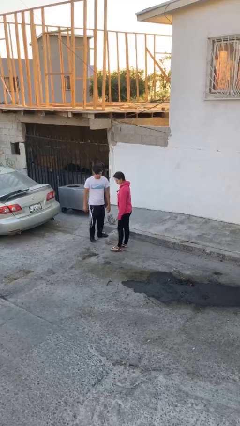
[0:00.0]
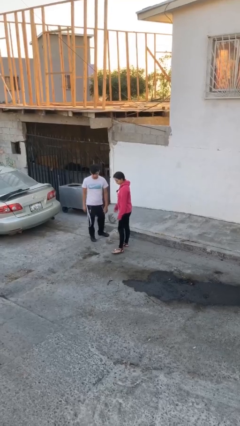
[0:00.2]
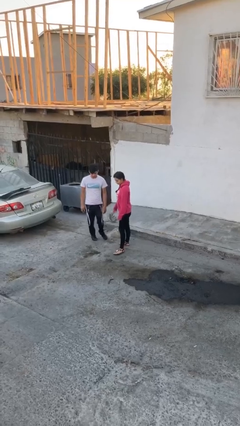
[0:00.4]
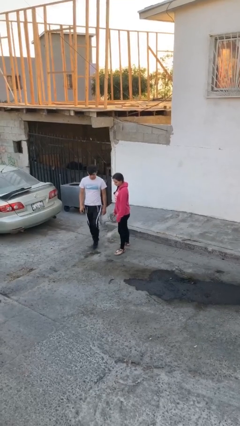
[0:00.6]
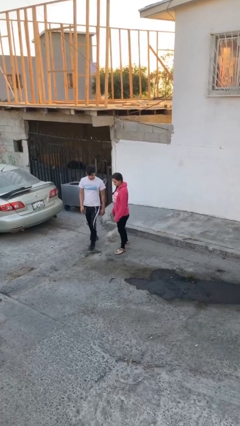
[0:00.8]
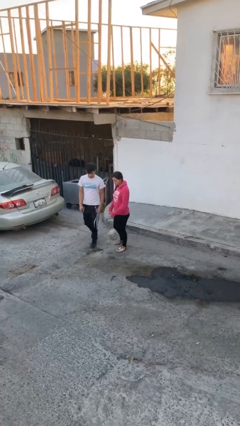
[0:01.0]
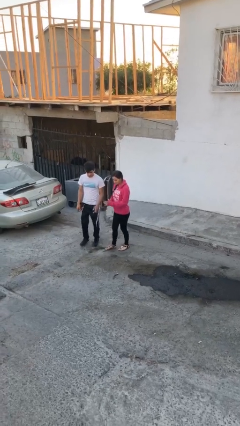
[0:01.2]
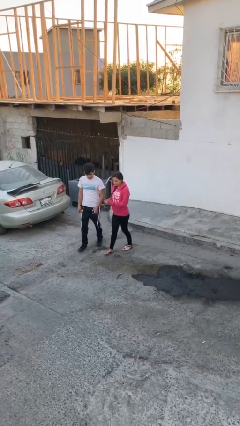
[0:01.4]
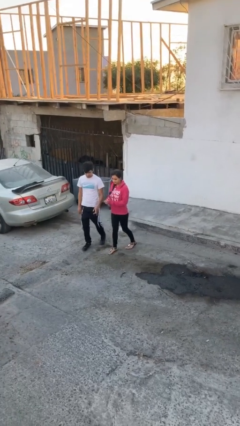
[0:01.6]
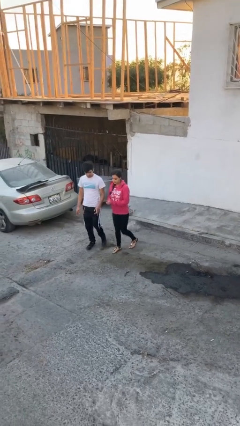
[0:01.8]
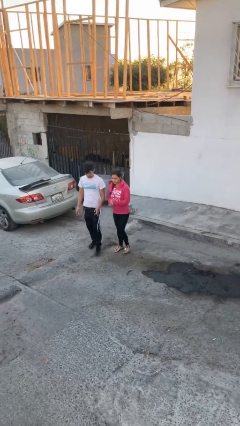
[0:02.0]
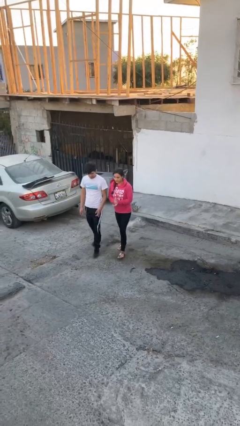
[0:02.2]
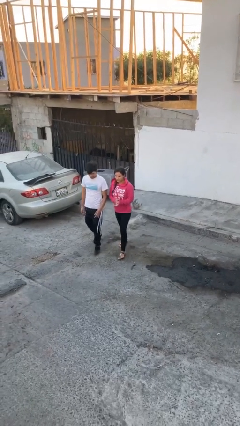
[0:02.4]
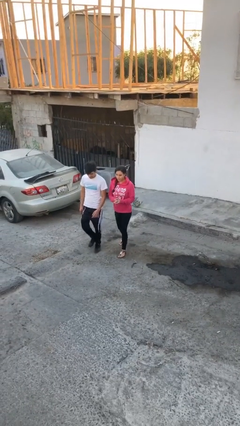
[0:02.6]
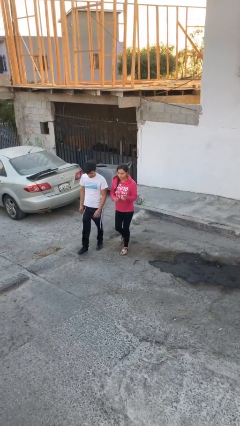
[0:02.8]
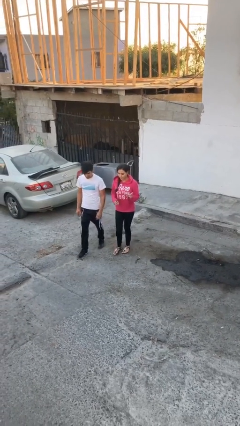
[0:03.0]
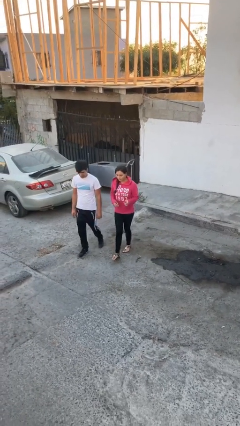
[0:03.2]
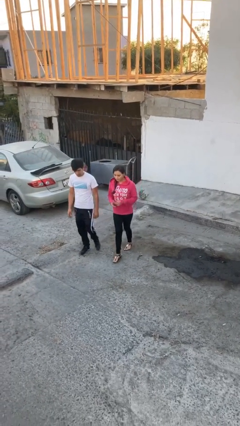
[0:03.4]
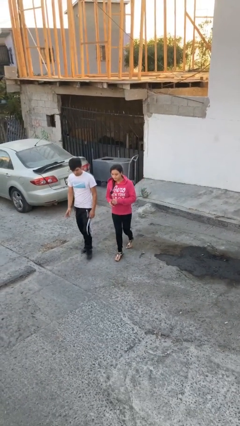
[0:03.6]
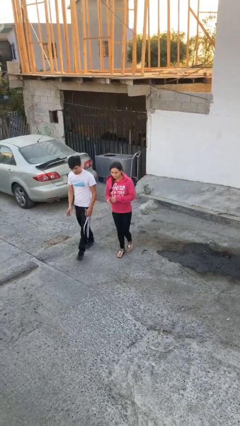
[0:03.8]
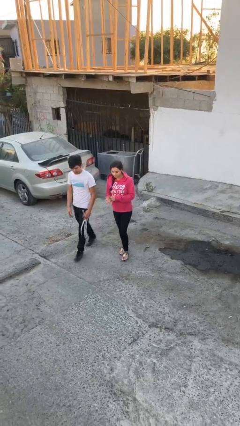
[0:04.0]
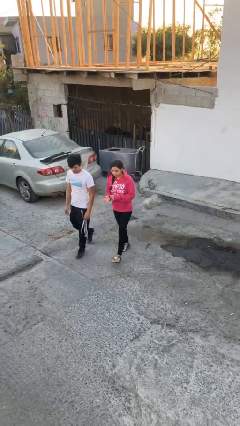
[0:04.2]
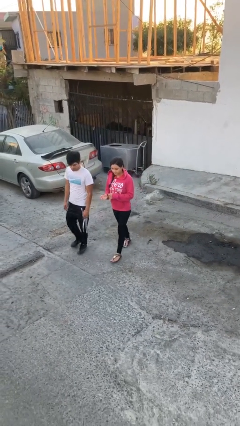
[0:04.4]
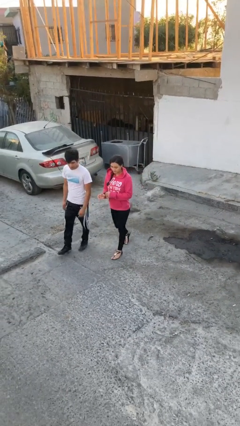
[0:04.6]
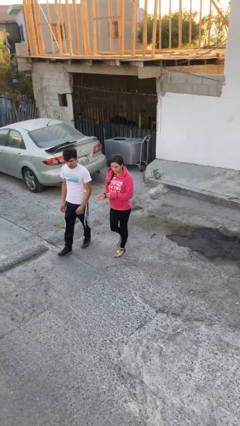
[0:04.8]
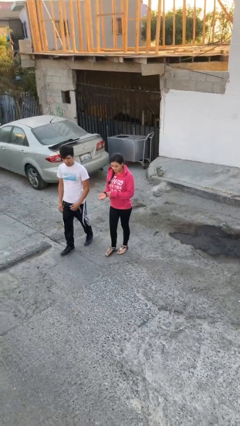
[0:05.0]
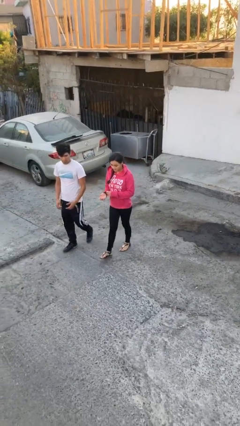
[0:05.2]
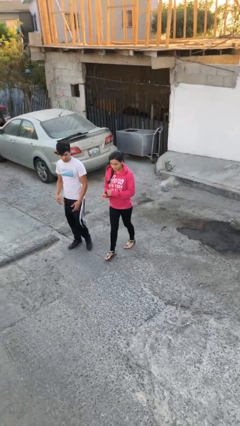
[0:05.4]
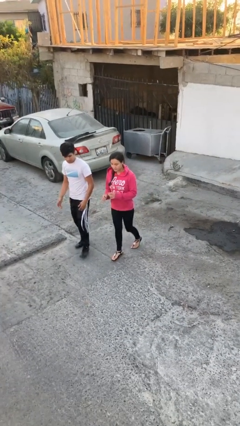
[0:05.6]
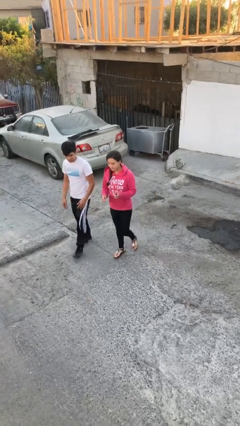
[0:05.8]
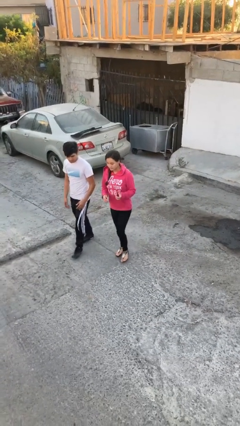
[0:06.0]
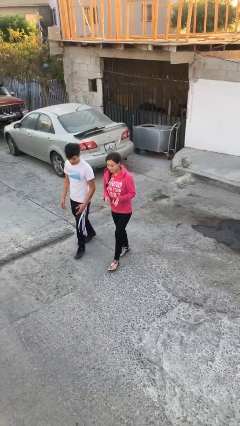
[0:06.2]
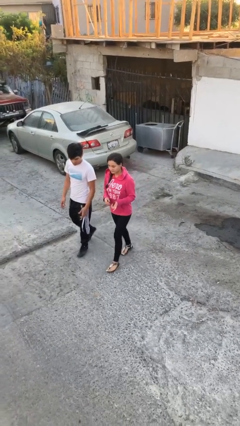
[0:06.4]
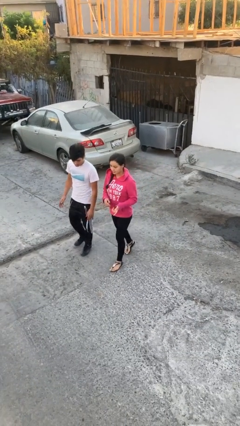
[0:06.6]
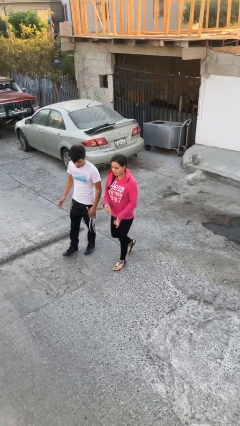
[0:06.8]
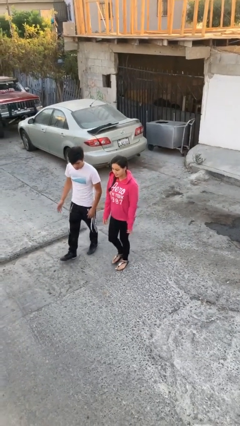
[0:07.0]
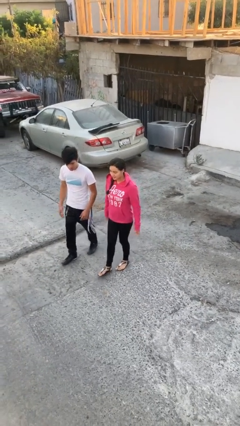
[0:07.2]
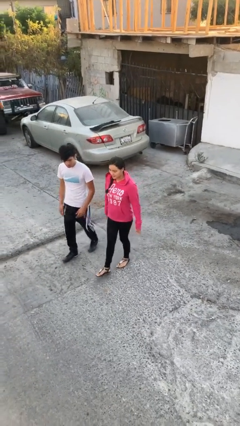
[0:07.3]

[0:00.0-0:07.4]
person talks to person

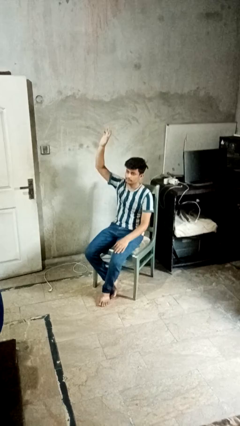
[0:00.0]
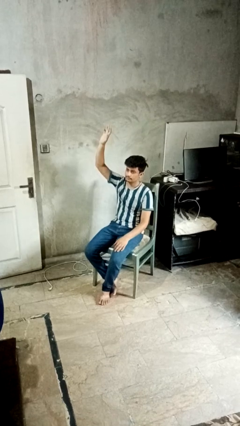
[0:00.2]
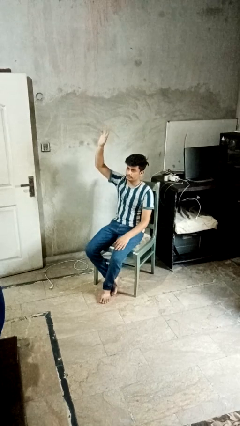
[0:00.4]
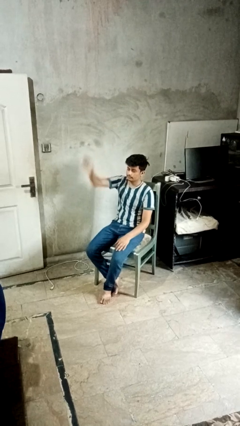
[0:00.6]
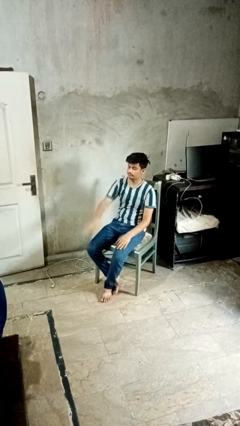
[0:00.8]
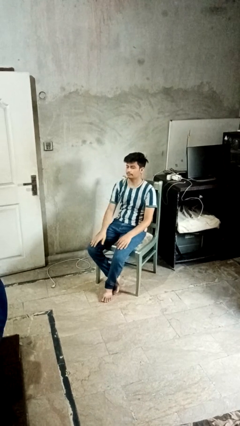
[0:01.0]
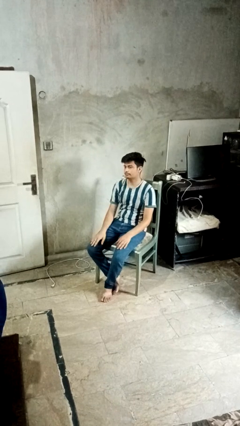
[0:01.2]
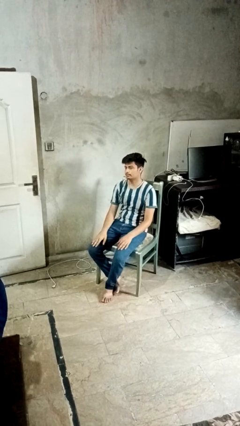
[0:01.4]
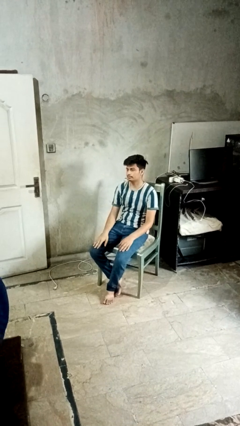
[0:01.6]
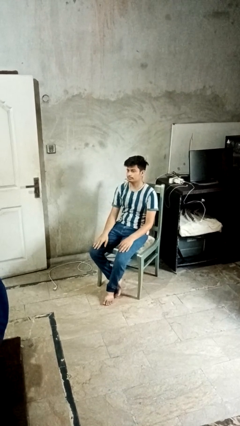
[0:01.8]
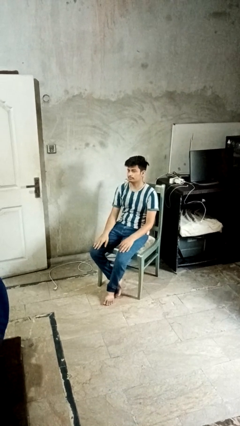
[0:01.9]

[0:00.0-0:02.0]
person gestures lower hand

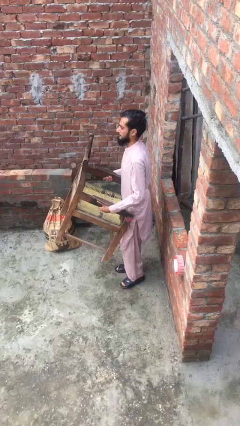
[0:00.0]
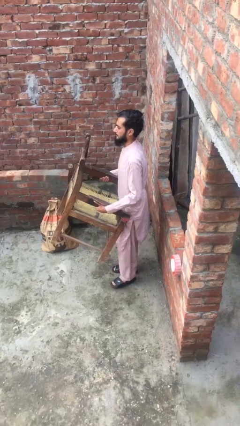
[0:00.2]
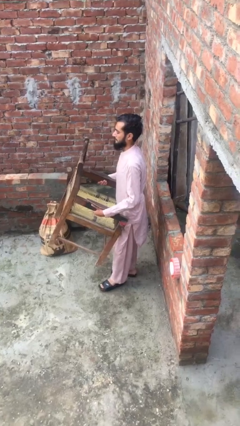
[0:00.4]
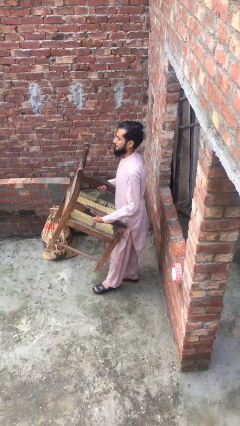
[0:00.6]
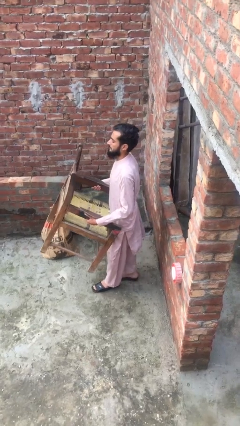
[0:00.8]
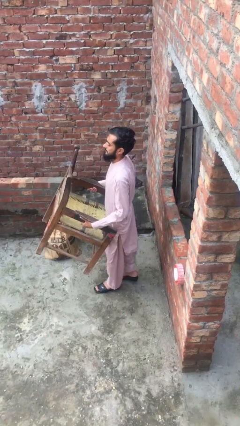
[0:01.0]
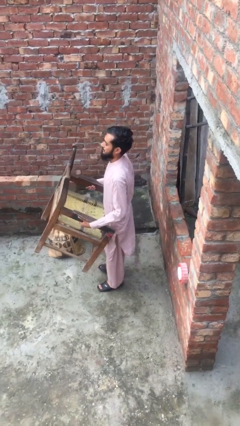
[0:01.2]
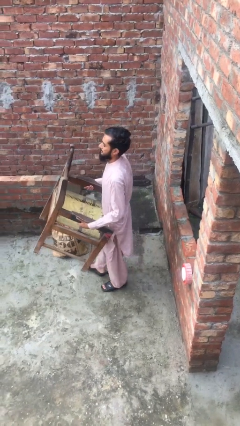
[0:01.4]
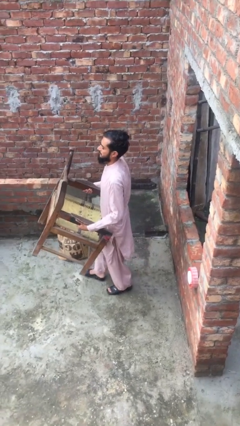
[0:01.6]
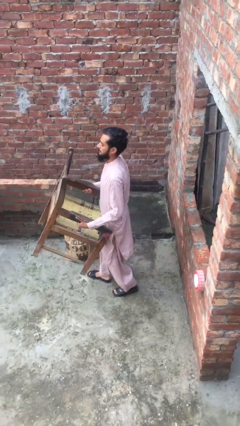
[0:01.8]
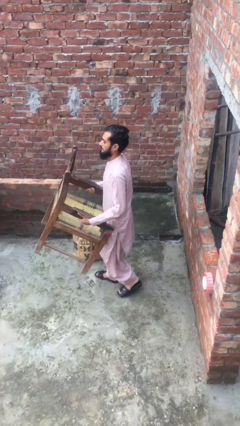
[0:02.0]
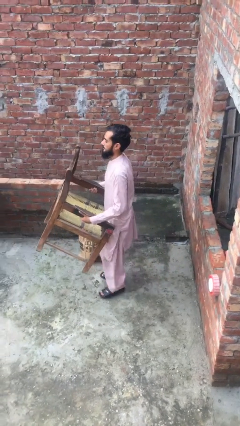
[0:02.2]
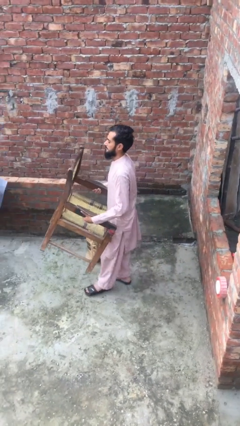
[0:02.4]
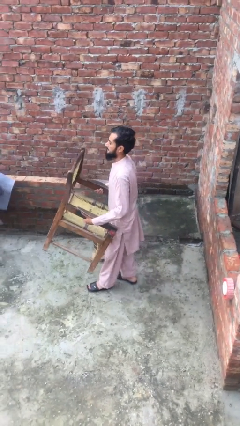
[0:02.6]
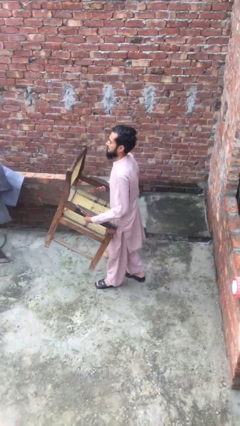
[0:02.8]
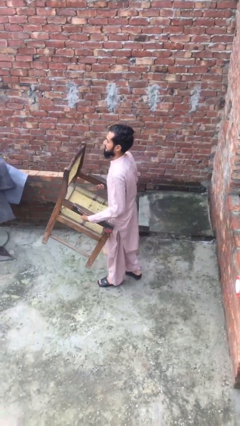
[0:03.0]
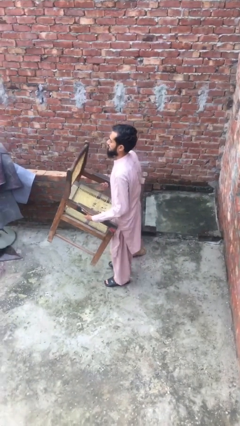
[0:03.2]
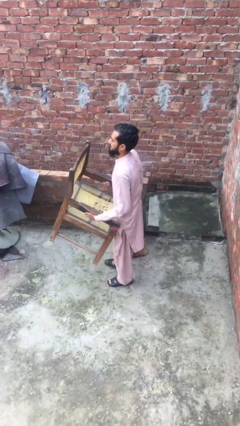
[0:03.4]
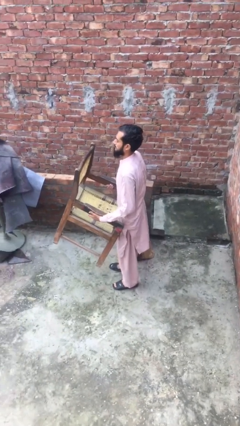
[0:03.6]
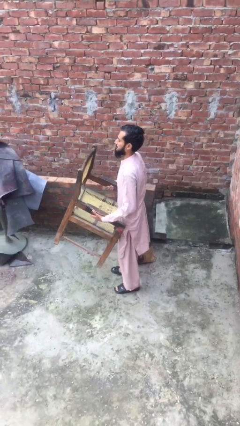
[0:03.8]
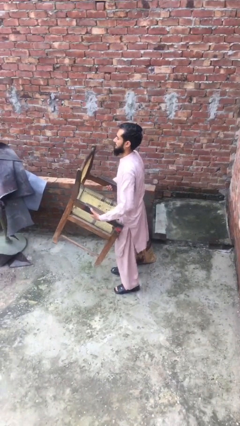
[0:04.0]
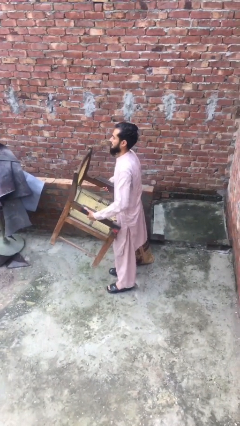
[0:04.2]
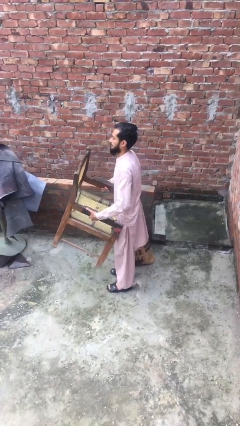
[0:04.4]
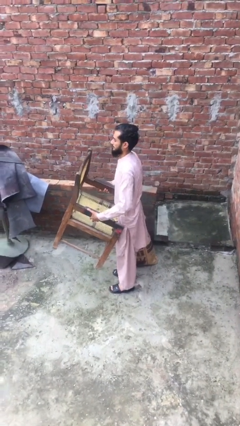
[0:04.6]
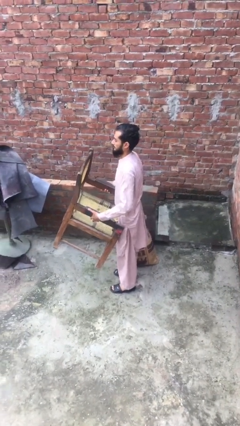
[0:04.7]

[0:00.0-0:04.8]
person carries heavy object

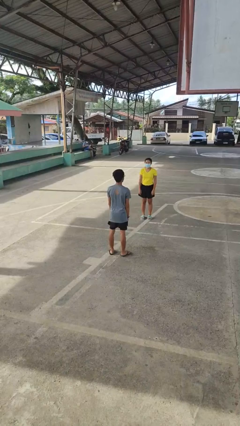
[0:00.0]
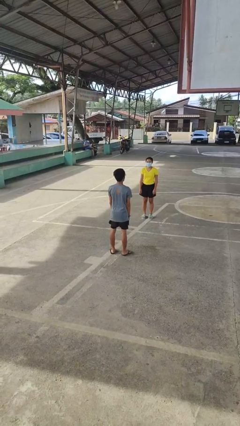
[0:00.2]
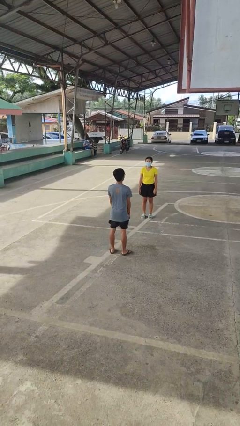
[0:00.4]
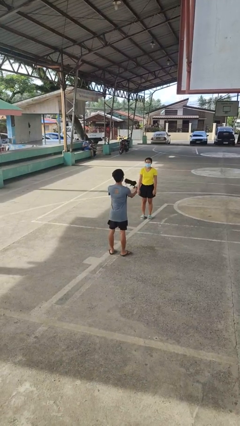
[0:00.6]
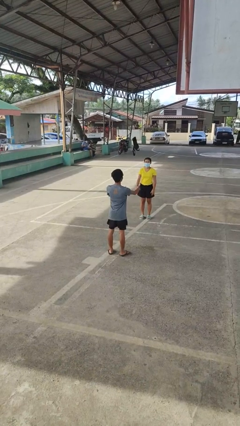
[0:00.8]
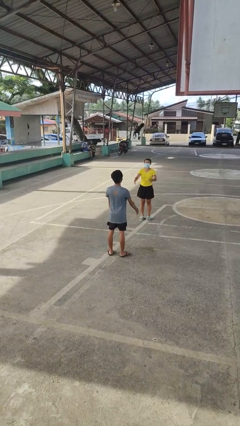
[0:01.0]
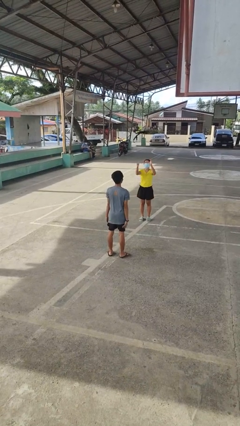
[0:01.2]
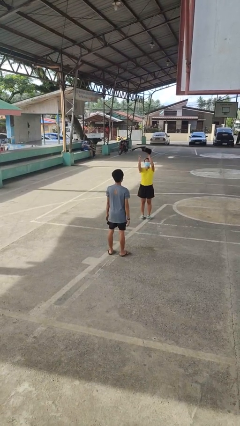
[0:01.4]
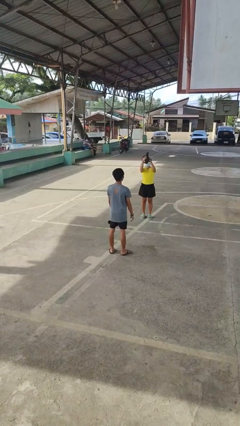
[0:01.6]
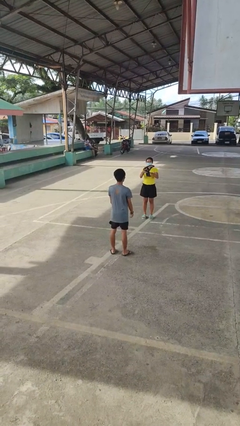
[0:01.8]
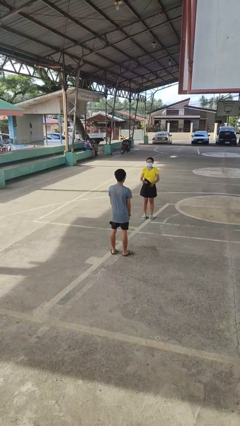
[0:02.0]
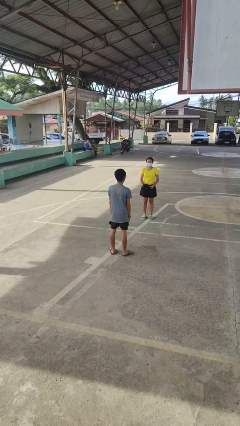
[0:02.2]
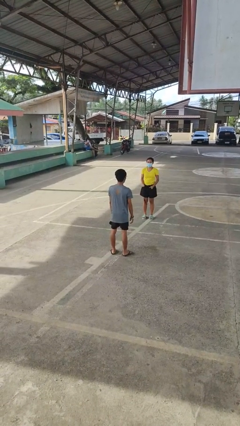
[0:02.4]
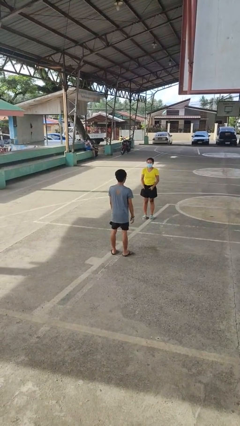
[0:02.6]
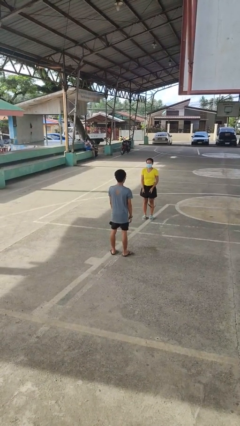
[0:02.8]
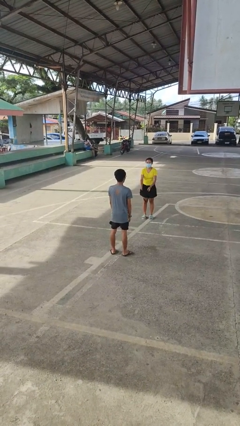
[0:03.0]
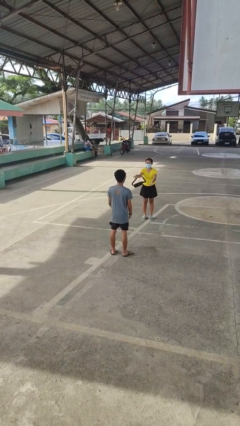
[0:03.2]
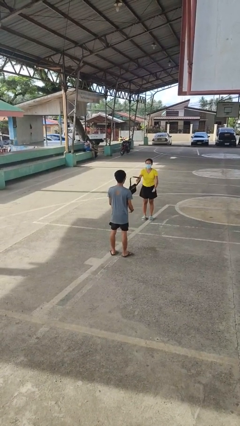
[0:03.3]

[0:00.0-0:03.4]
person throws object to person
